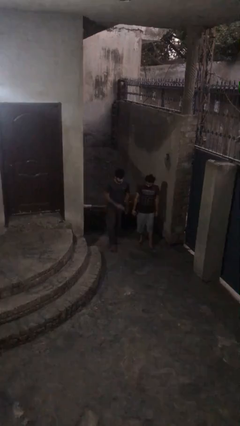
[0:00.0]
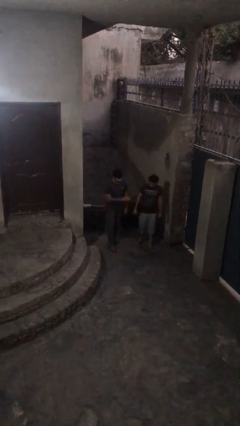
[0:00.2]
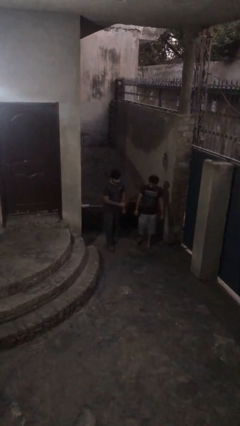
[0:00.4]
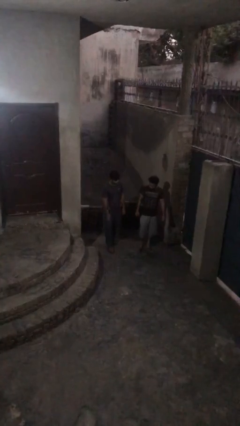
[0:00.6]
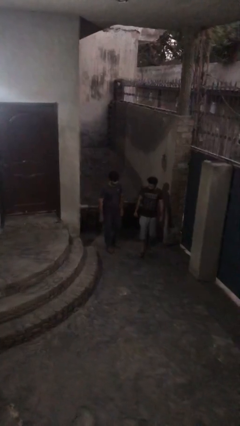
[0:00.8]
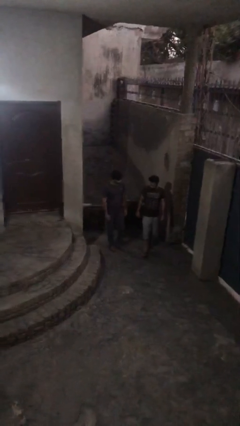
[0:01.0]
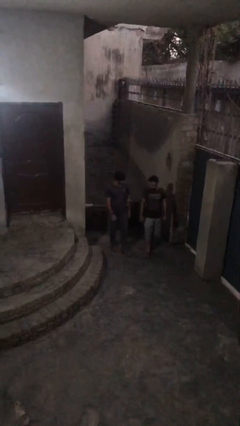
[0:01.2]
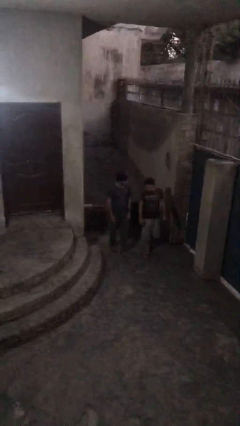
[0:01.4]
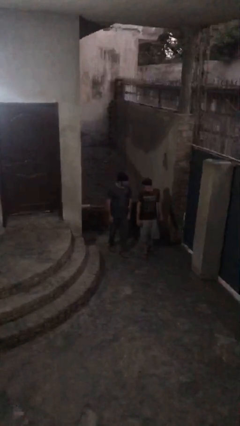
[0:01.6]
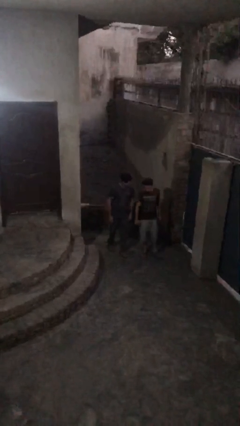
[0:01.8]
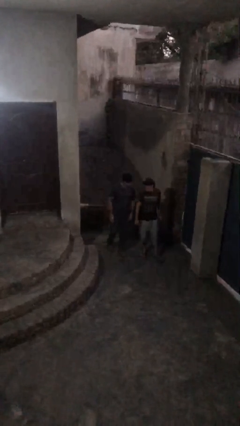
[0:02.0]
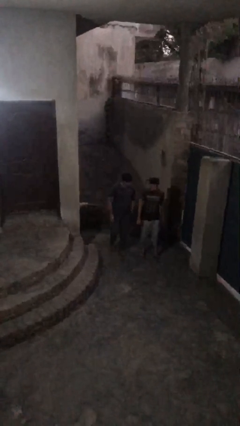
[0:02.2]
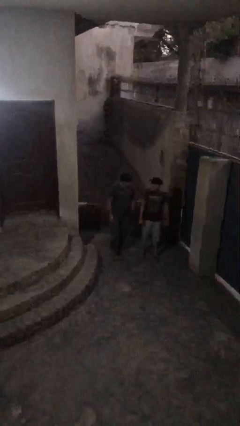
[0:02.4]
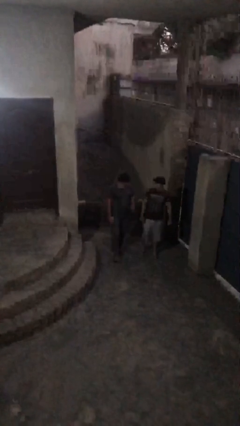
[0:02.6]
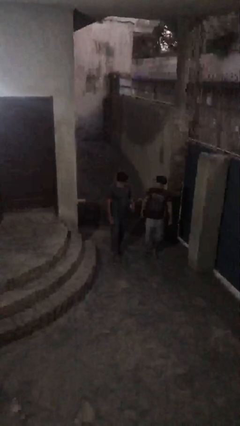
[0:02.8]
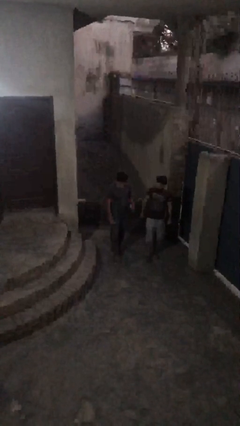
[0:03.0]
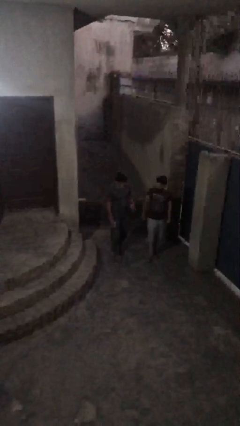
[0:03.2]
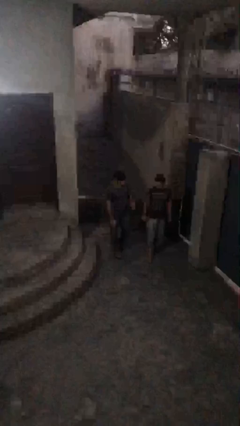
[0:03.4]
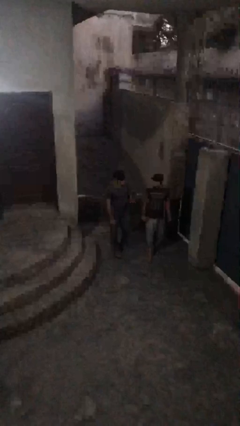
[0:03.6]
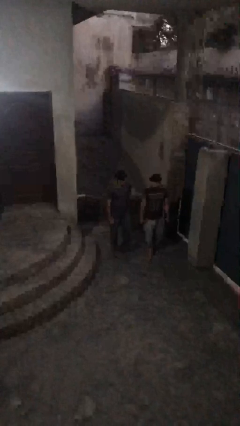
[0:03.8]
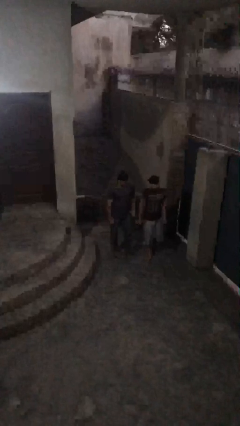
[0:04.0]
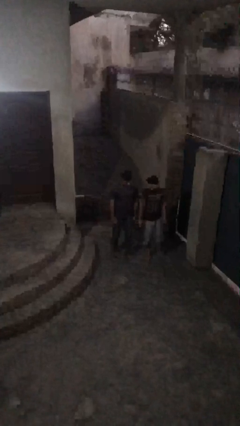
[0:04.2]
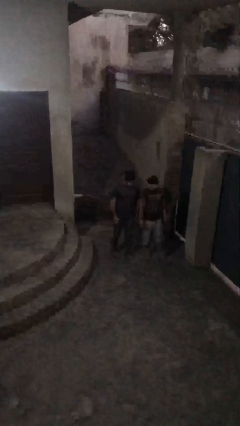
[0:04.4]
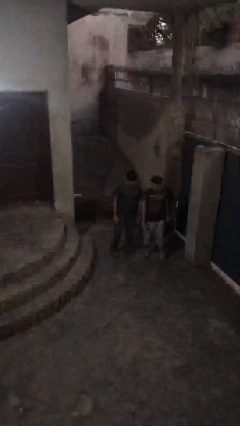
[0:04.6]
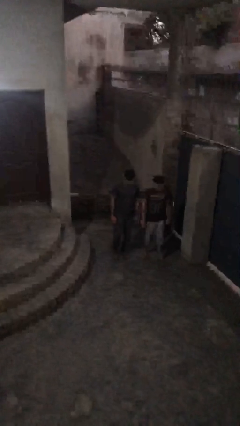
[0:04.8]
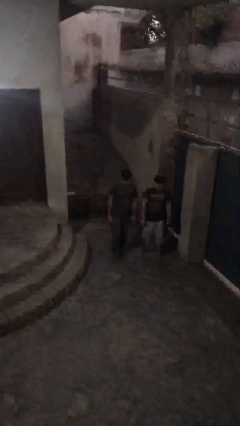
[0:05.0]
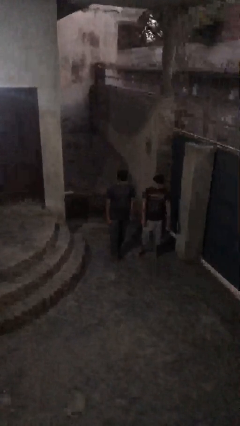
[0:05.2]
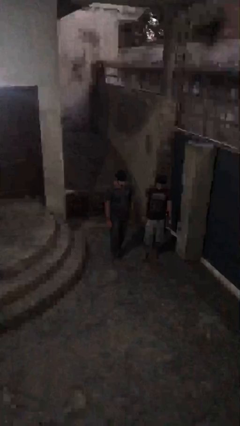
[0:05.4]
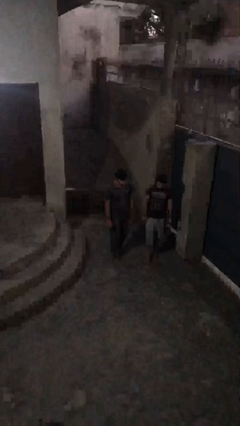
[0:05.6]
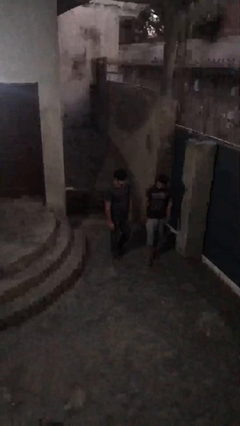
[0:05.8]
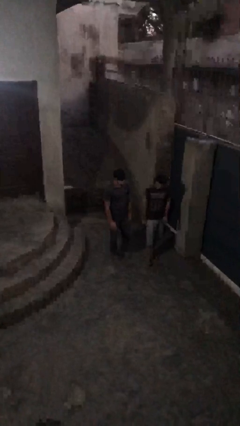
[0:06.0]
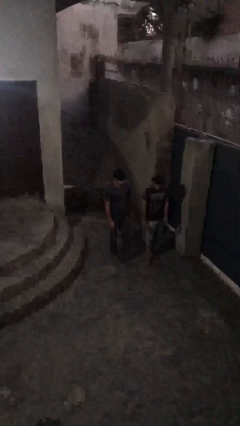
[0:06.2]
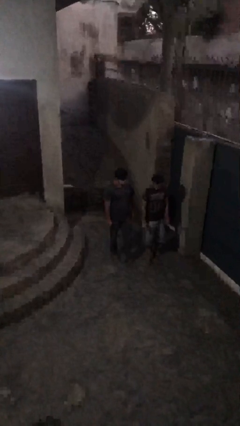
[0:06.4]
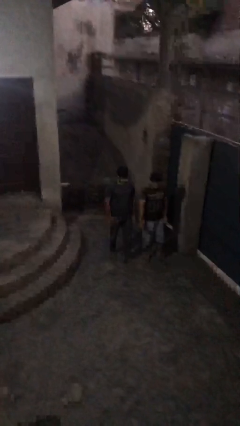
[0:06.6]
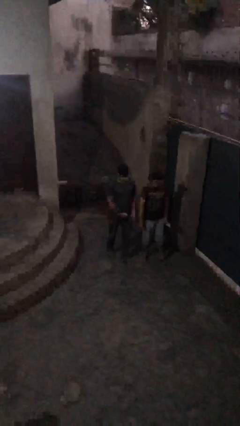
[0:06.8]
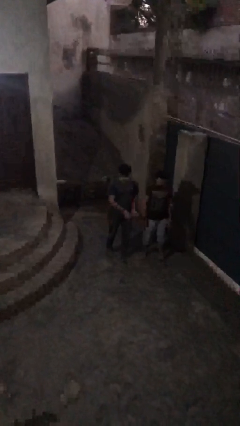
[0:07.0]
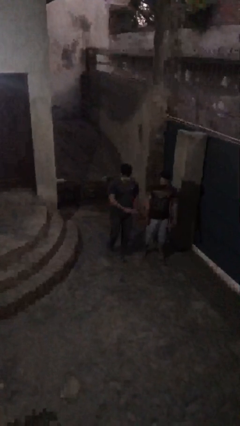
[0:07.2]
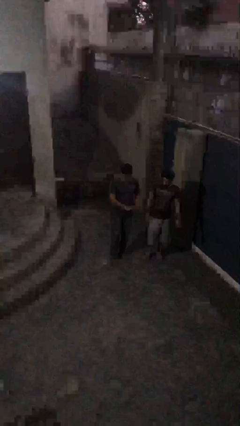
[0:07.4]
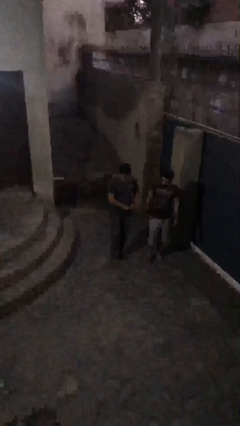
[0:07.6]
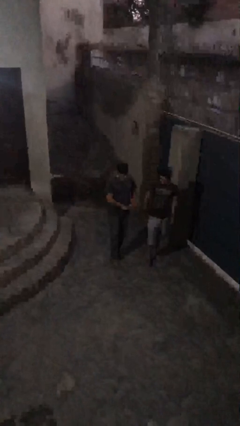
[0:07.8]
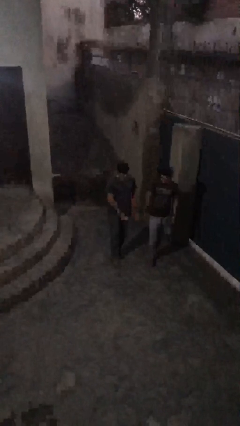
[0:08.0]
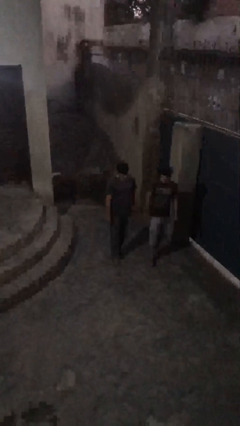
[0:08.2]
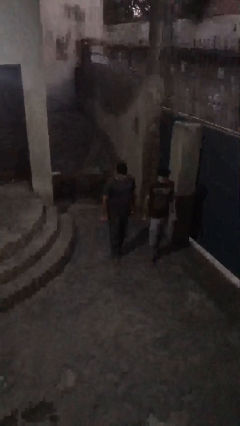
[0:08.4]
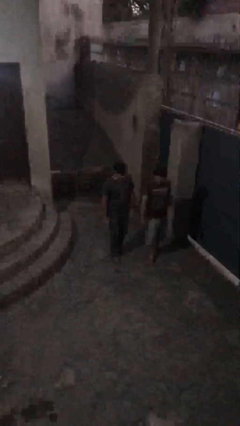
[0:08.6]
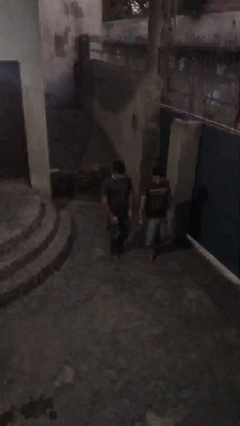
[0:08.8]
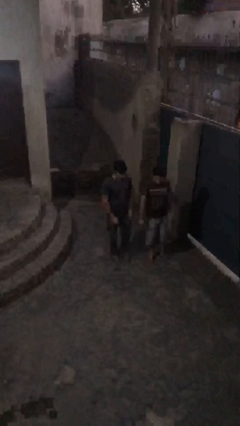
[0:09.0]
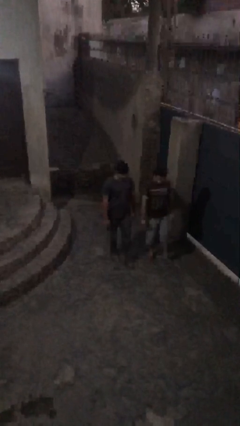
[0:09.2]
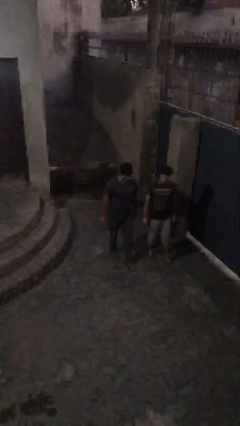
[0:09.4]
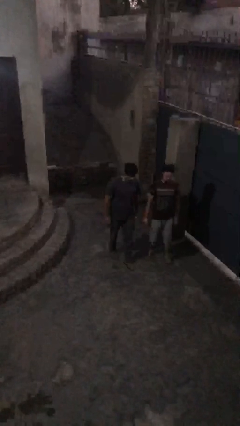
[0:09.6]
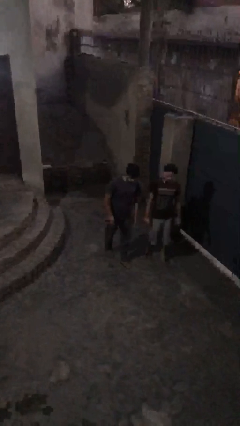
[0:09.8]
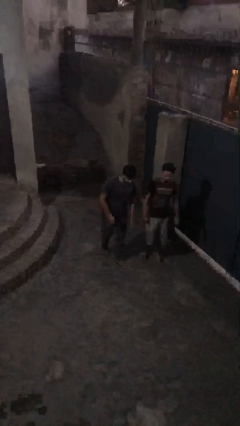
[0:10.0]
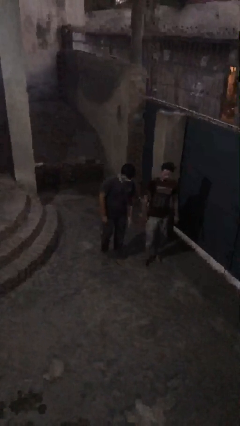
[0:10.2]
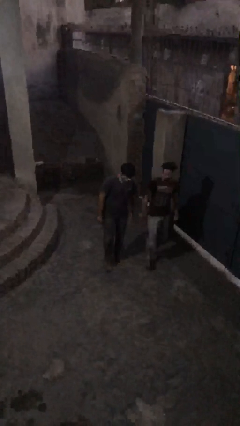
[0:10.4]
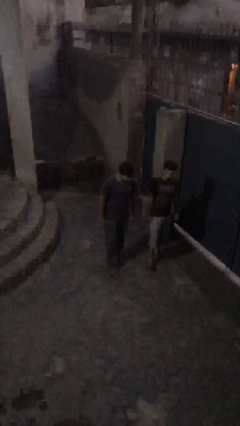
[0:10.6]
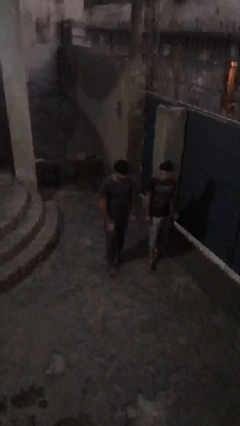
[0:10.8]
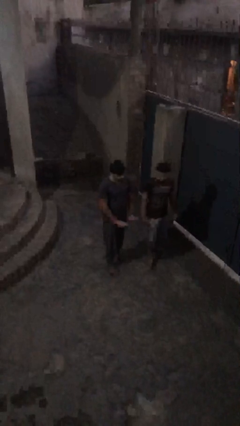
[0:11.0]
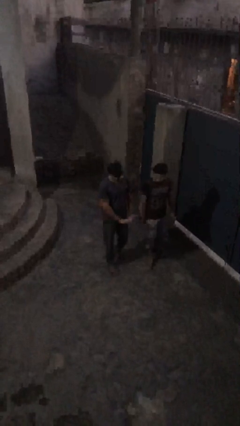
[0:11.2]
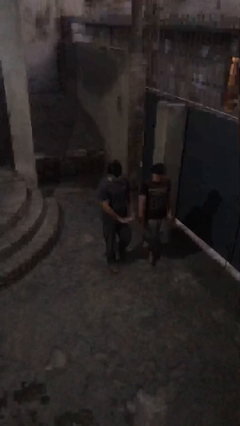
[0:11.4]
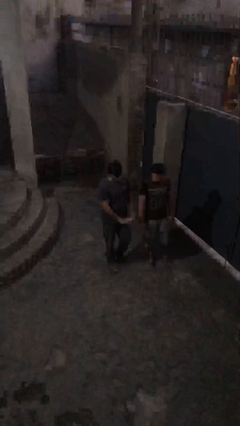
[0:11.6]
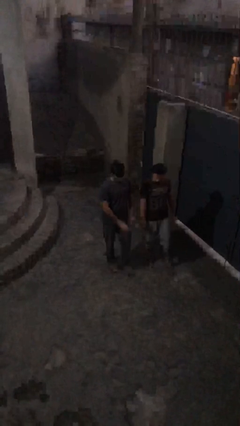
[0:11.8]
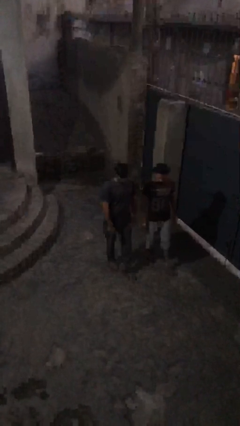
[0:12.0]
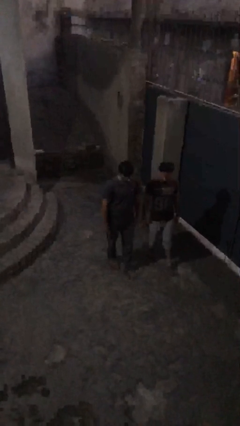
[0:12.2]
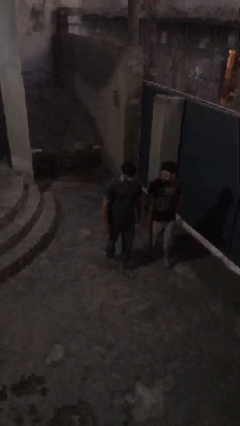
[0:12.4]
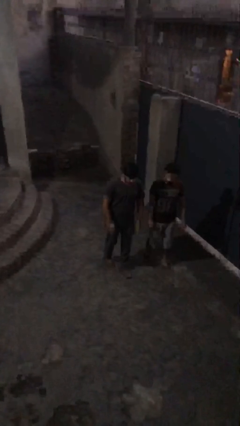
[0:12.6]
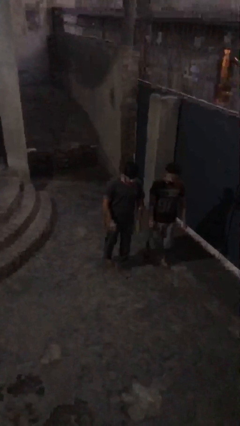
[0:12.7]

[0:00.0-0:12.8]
person talks to person

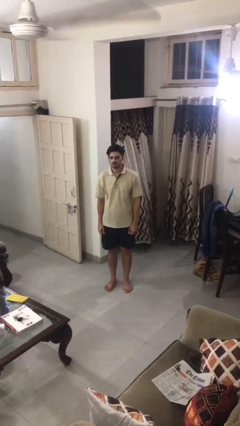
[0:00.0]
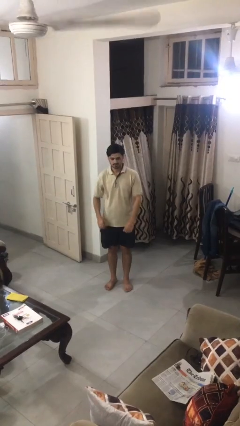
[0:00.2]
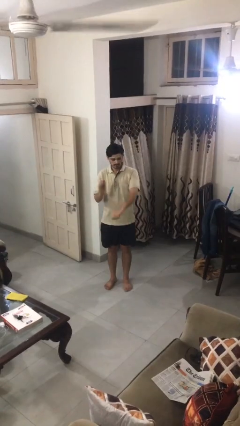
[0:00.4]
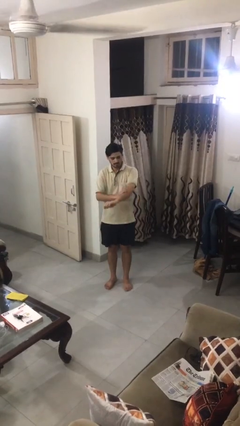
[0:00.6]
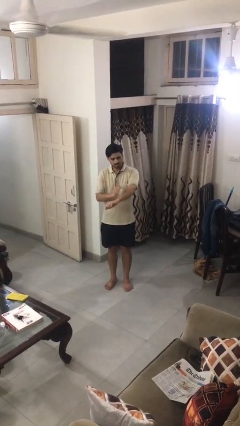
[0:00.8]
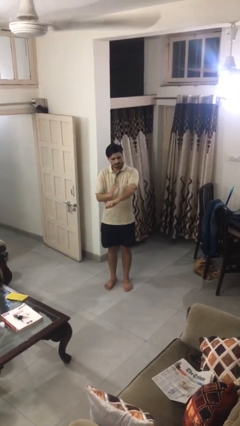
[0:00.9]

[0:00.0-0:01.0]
person swats bug

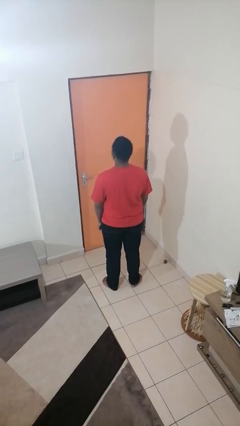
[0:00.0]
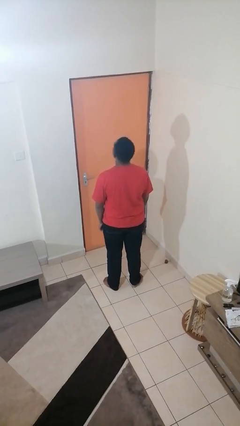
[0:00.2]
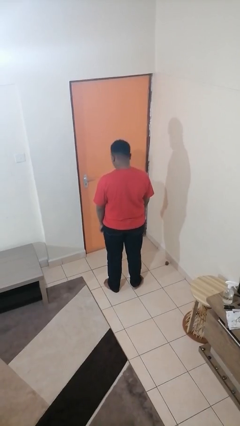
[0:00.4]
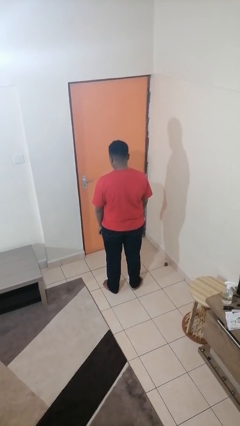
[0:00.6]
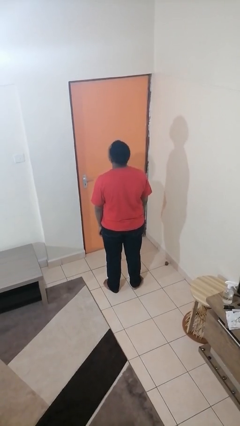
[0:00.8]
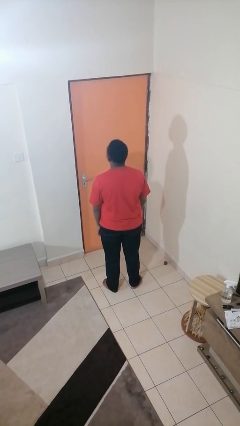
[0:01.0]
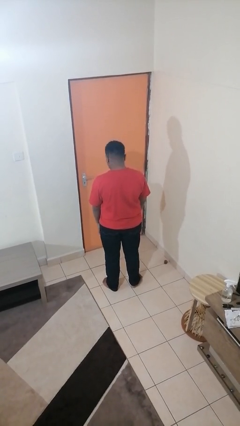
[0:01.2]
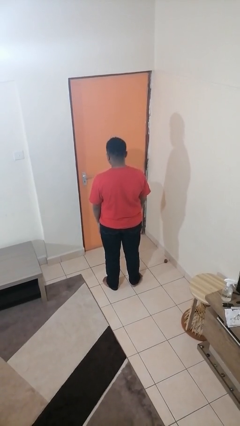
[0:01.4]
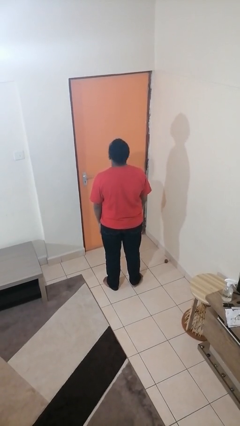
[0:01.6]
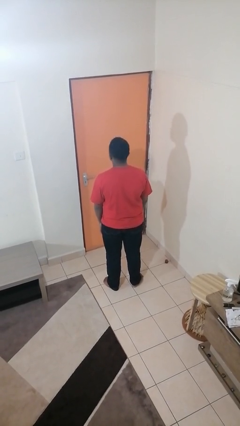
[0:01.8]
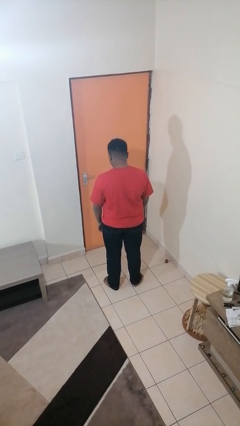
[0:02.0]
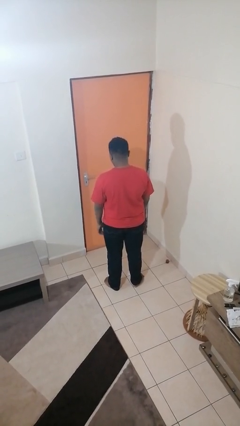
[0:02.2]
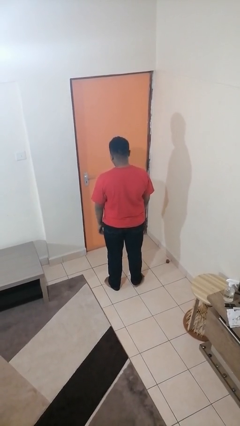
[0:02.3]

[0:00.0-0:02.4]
person nods head

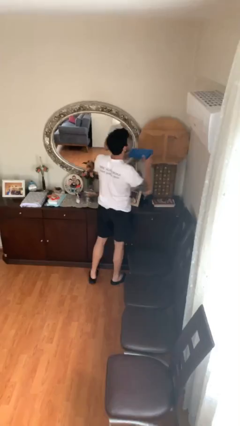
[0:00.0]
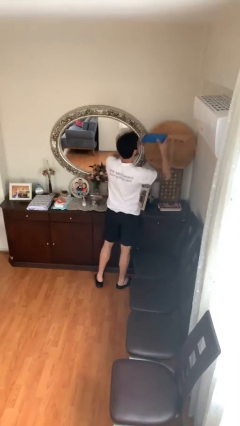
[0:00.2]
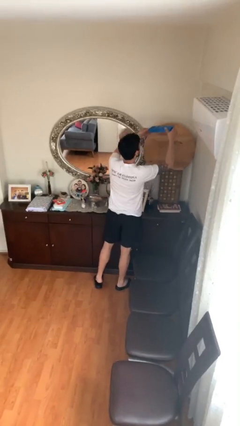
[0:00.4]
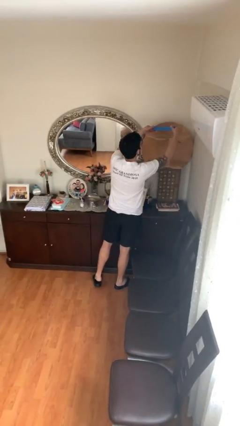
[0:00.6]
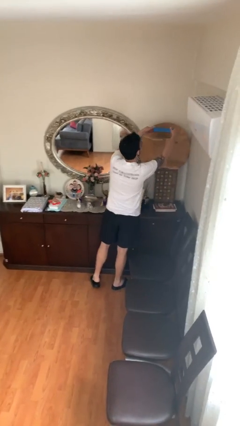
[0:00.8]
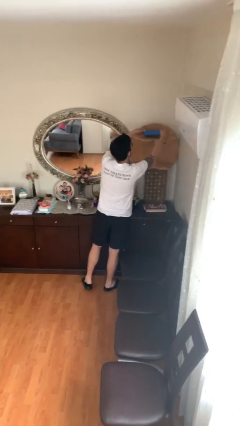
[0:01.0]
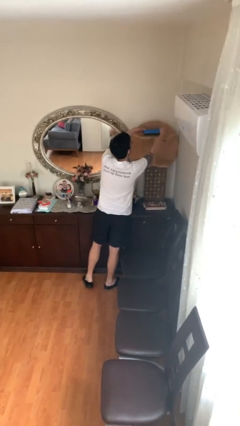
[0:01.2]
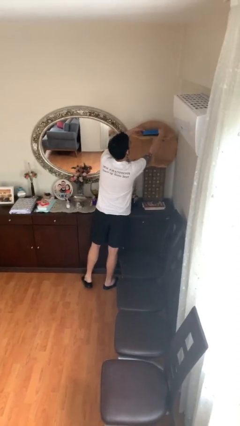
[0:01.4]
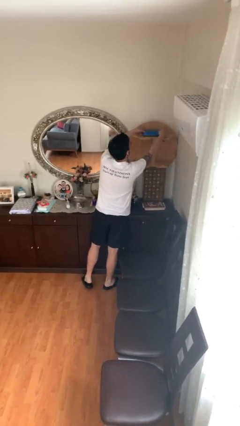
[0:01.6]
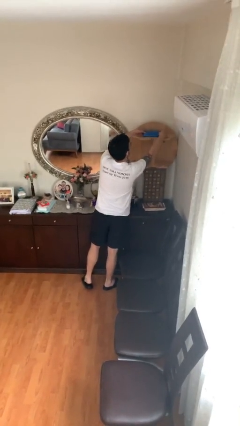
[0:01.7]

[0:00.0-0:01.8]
person puts down object on shelf

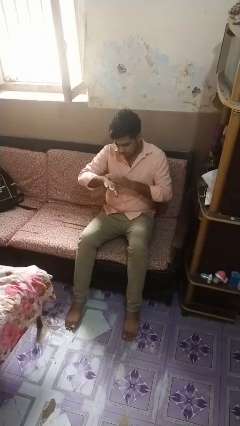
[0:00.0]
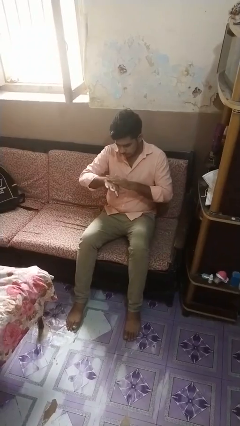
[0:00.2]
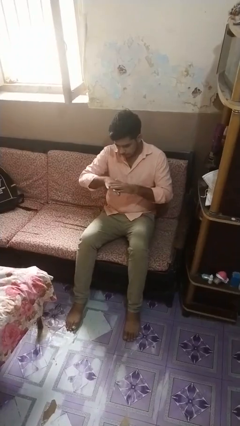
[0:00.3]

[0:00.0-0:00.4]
person looks at hands in lap
